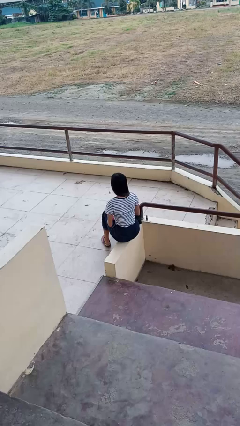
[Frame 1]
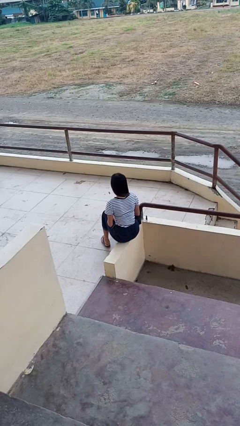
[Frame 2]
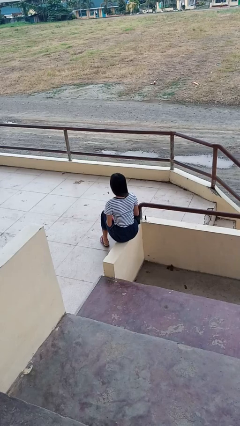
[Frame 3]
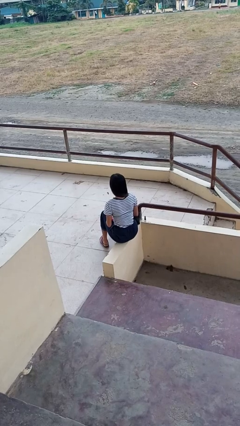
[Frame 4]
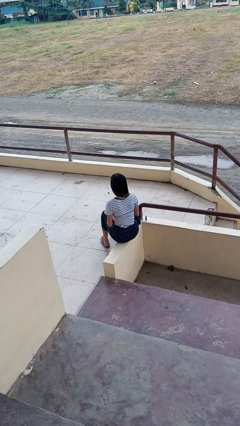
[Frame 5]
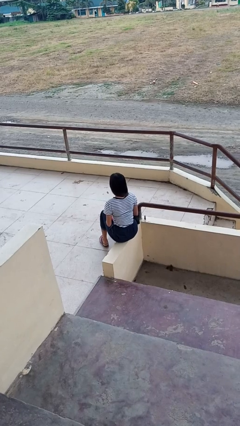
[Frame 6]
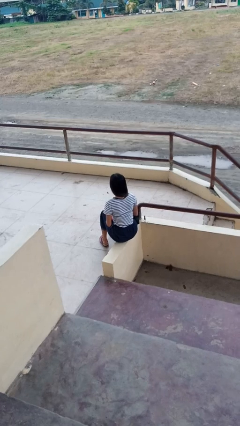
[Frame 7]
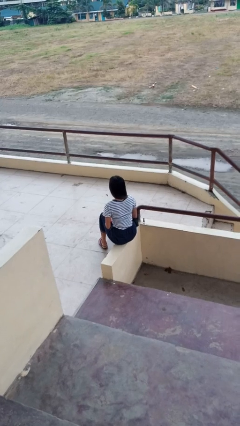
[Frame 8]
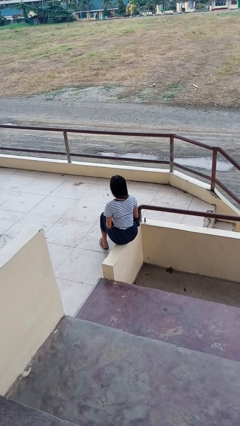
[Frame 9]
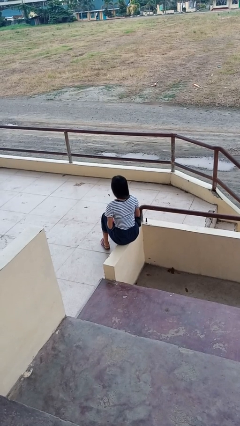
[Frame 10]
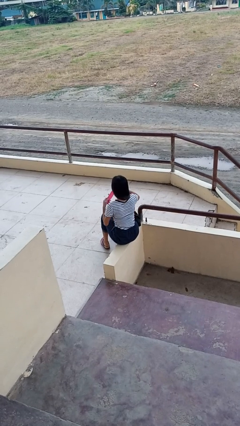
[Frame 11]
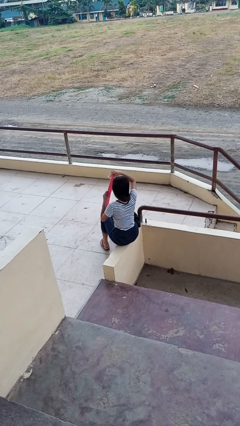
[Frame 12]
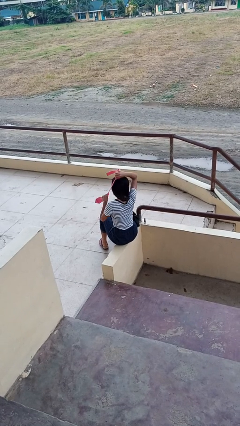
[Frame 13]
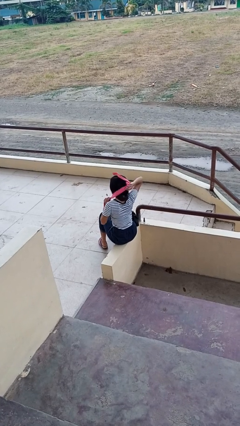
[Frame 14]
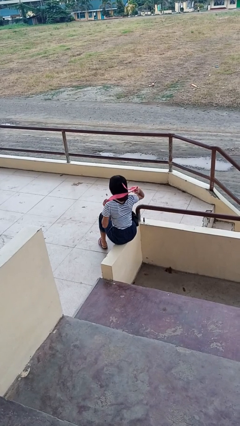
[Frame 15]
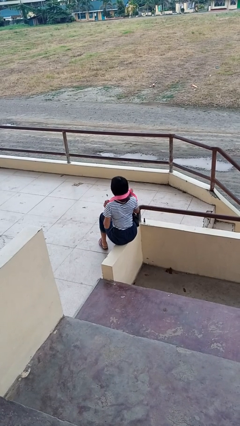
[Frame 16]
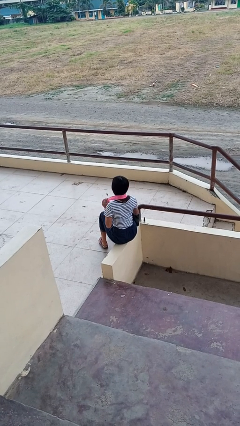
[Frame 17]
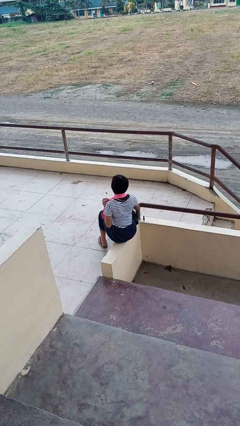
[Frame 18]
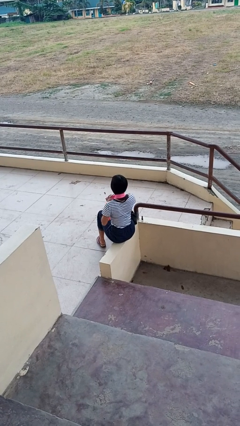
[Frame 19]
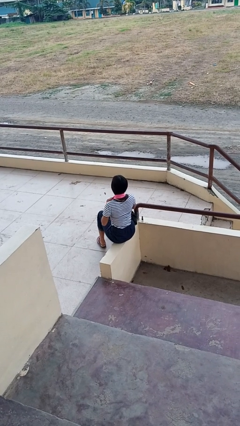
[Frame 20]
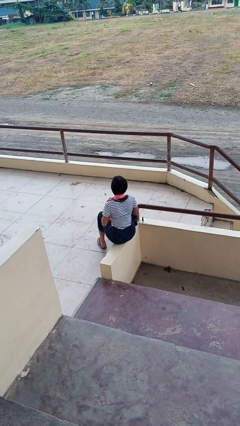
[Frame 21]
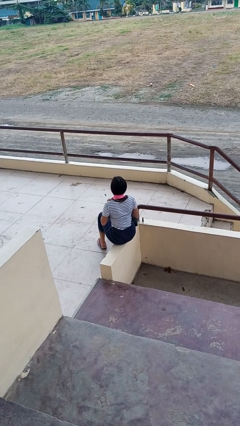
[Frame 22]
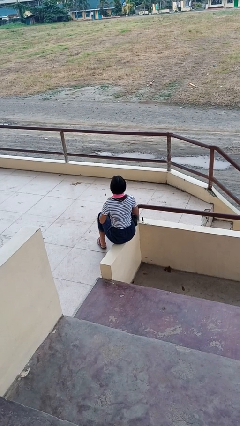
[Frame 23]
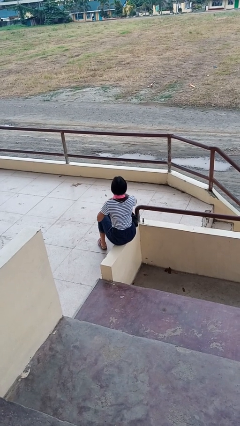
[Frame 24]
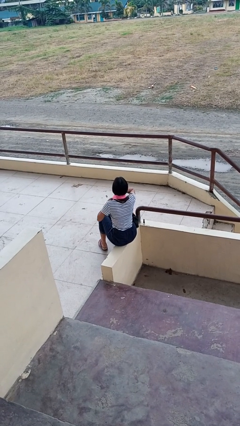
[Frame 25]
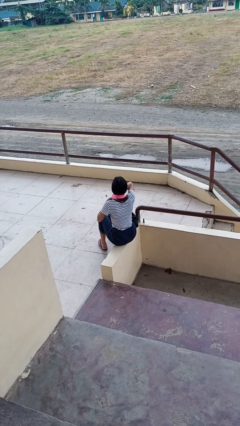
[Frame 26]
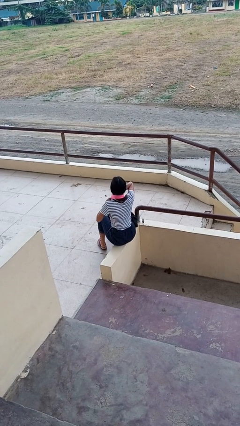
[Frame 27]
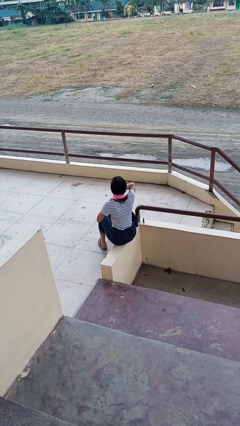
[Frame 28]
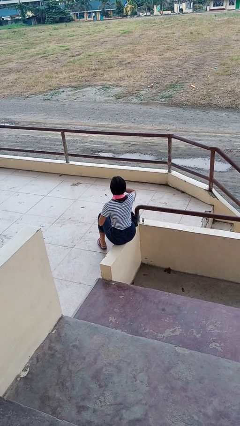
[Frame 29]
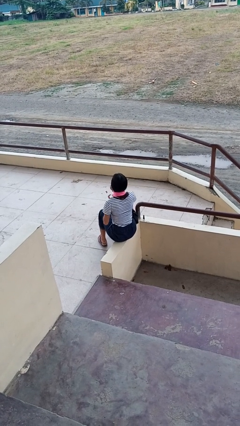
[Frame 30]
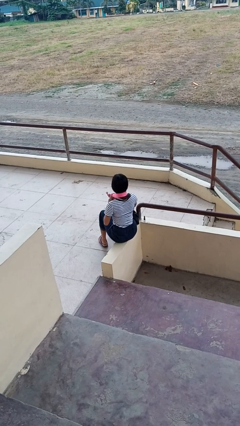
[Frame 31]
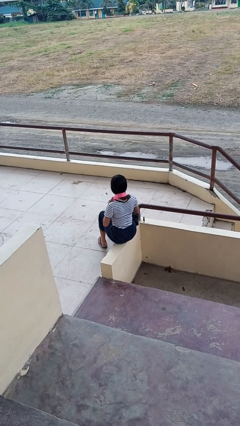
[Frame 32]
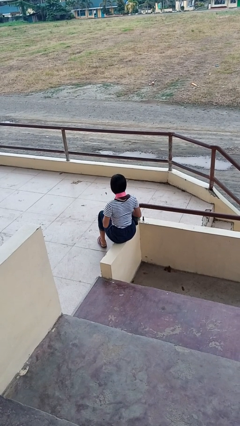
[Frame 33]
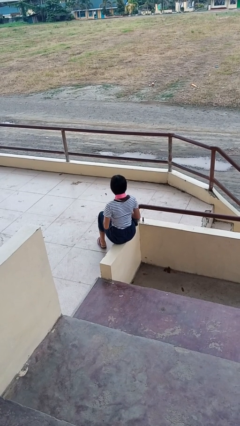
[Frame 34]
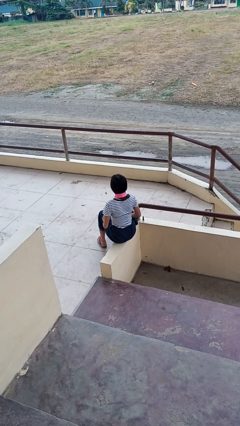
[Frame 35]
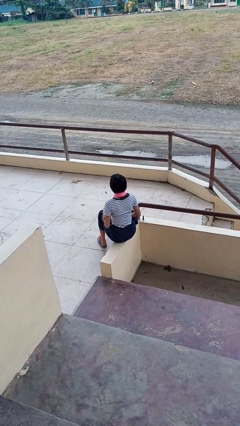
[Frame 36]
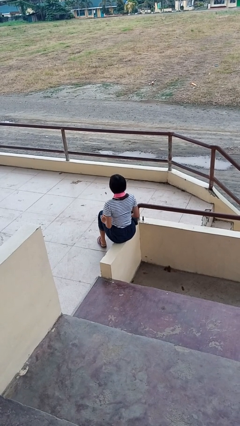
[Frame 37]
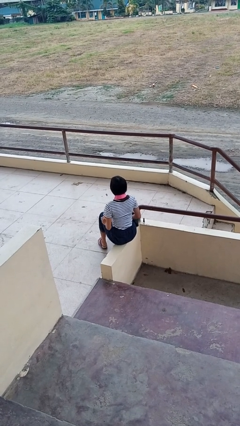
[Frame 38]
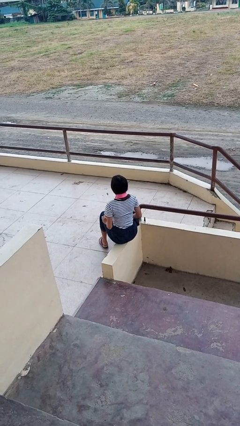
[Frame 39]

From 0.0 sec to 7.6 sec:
person puts on necktie

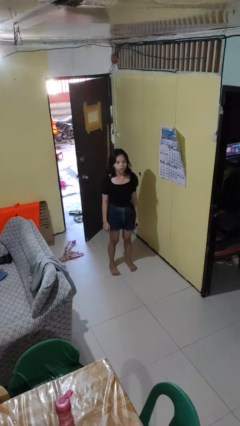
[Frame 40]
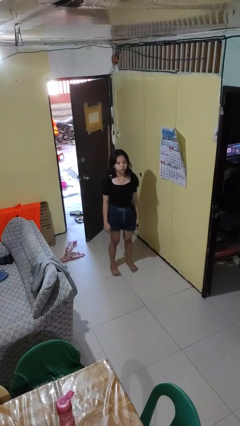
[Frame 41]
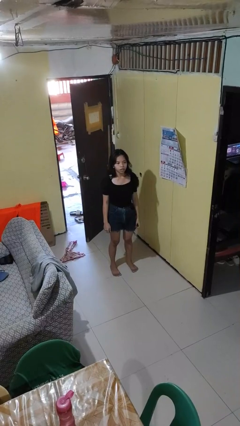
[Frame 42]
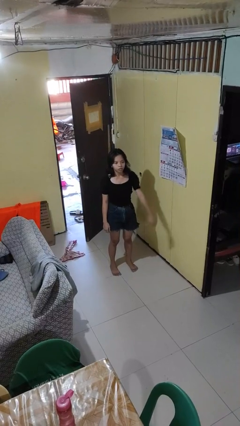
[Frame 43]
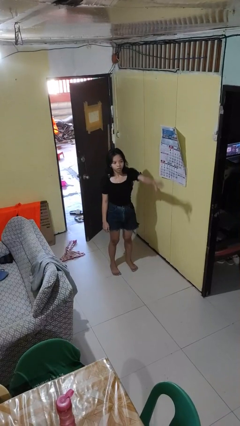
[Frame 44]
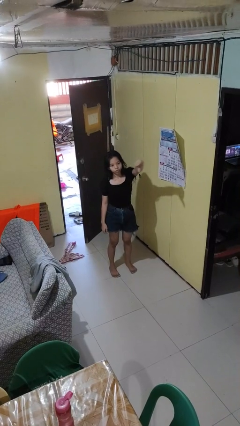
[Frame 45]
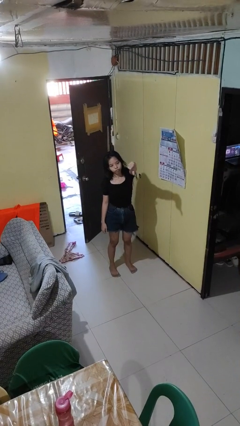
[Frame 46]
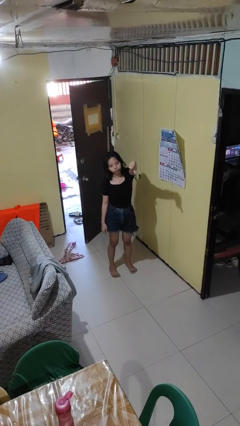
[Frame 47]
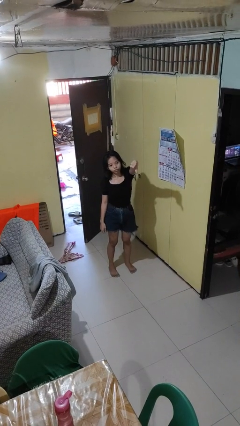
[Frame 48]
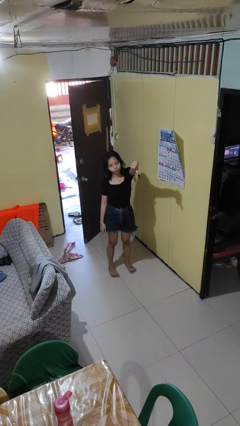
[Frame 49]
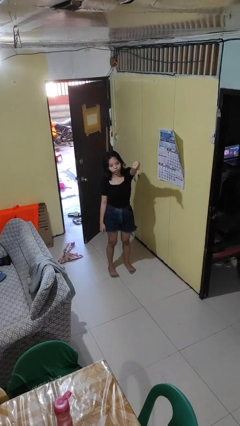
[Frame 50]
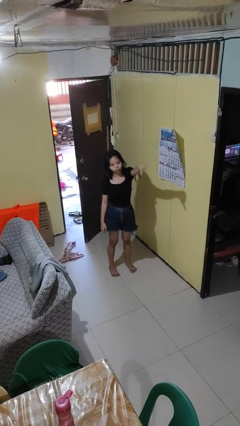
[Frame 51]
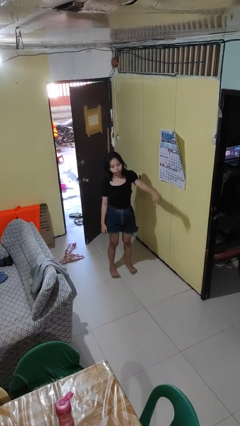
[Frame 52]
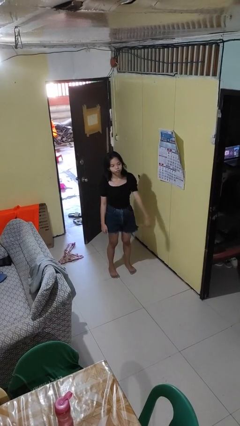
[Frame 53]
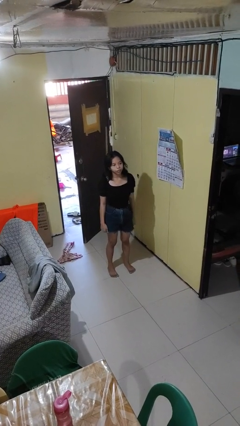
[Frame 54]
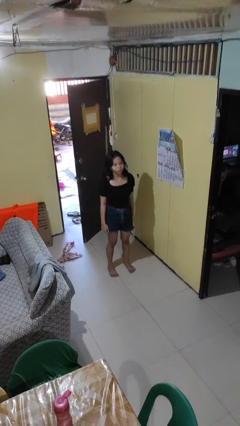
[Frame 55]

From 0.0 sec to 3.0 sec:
person gestures thumbs down

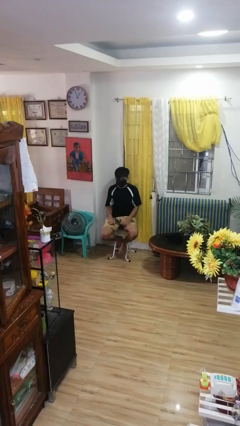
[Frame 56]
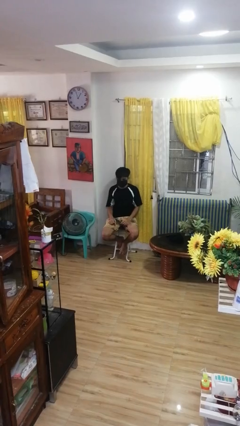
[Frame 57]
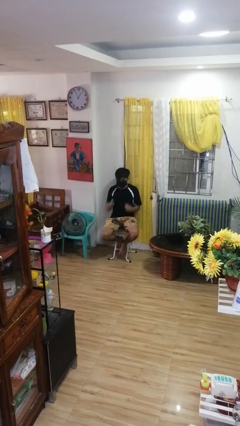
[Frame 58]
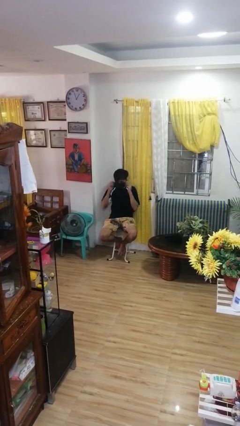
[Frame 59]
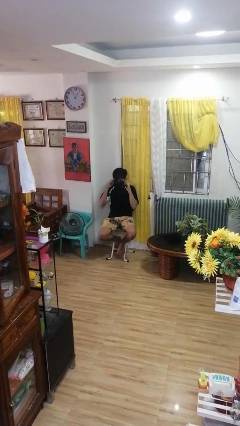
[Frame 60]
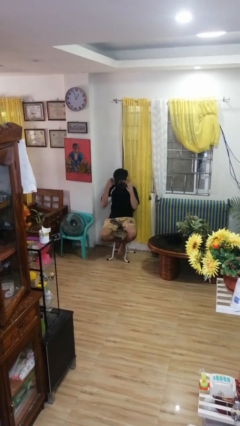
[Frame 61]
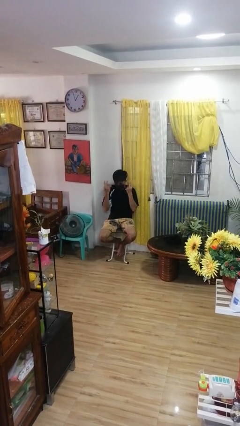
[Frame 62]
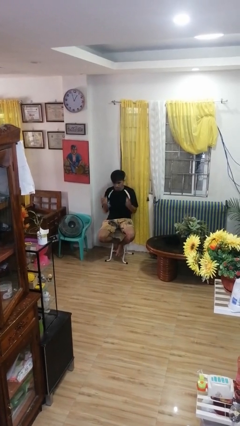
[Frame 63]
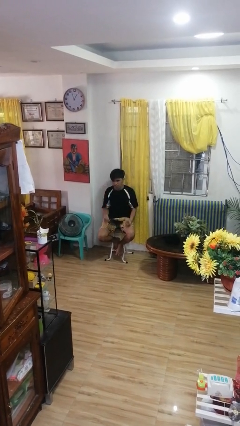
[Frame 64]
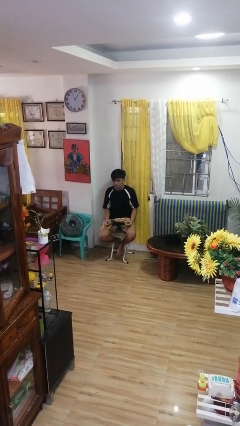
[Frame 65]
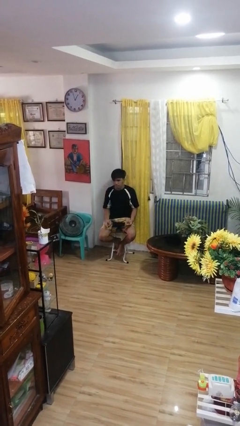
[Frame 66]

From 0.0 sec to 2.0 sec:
person takes off facemask

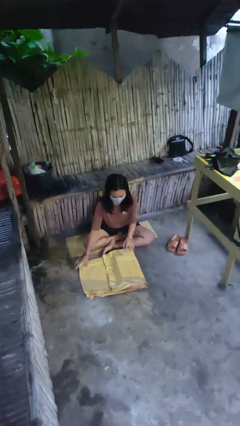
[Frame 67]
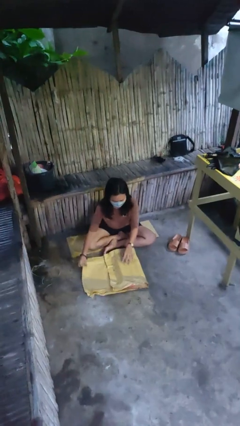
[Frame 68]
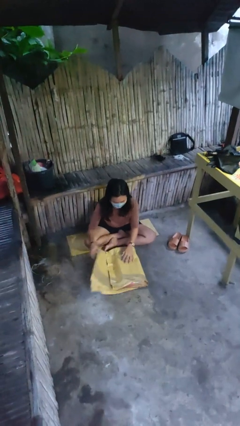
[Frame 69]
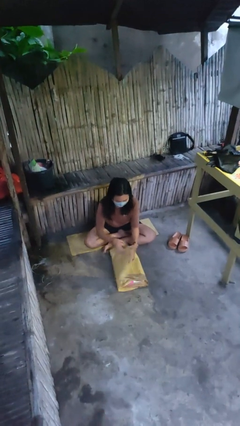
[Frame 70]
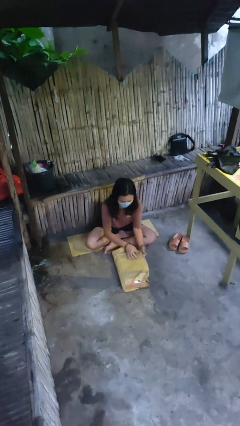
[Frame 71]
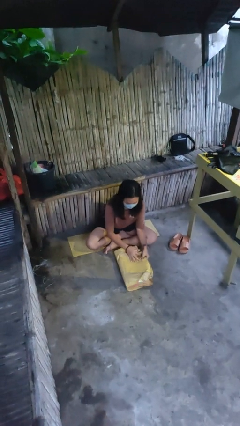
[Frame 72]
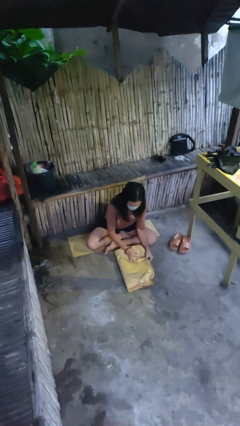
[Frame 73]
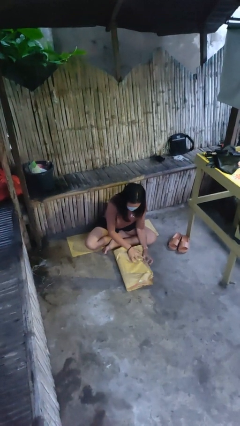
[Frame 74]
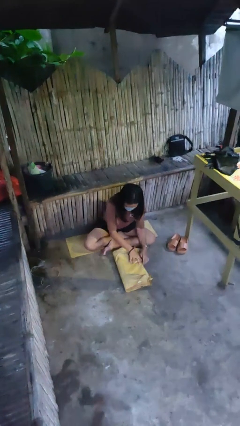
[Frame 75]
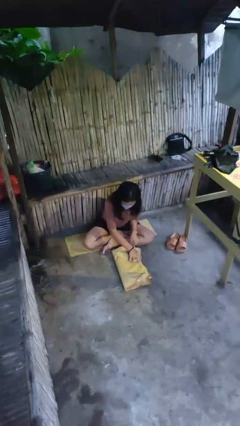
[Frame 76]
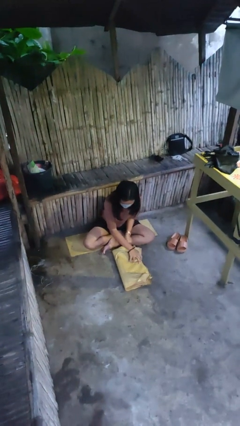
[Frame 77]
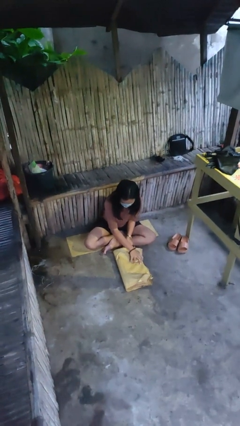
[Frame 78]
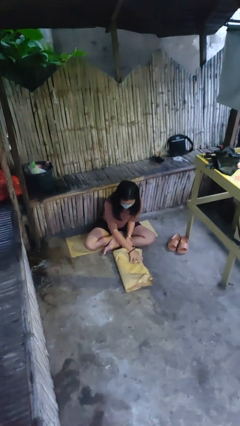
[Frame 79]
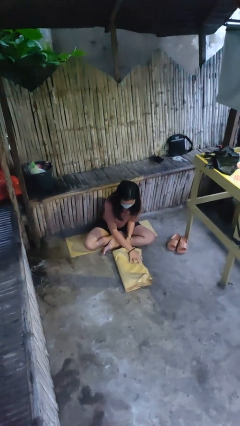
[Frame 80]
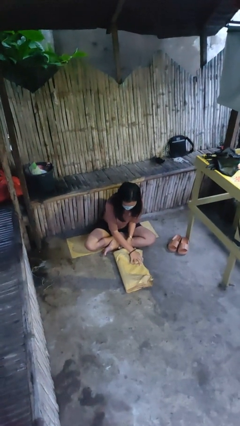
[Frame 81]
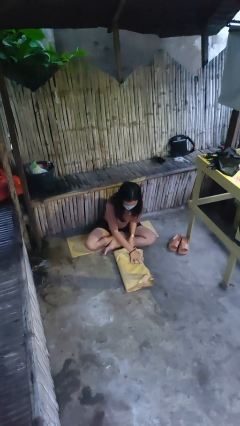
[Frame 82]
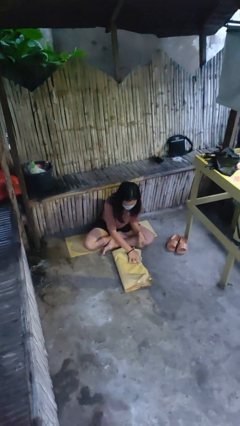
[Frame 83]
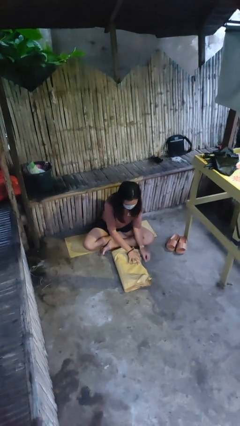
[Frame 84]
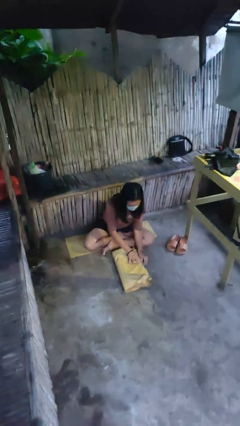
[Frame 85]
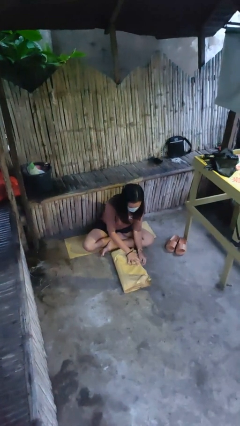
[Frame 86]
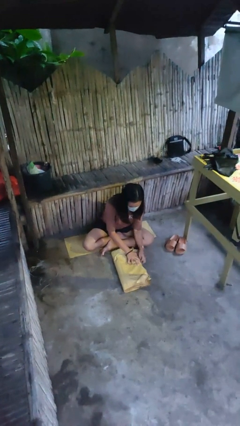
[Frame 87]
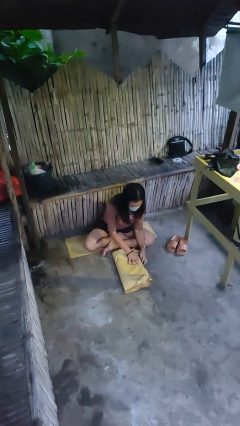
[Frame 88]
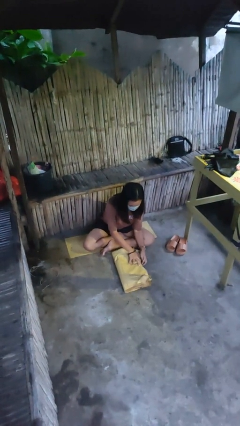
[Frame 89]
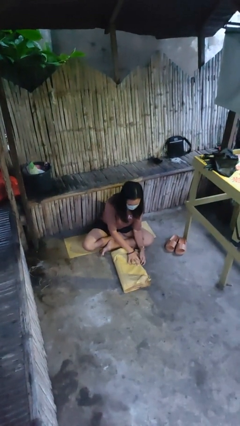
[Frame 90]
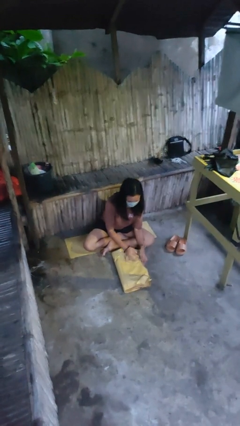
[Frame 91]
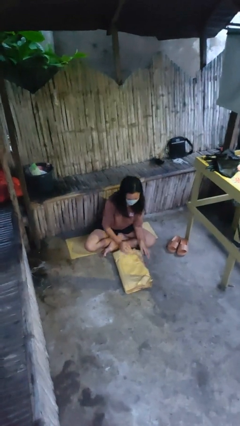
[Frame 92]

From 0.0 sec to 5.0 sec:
person wraps box

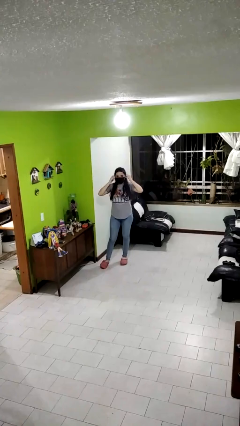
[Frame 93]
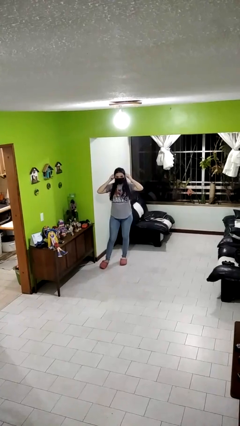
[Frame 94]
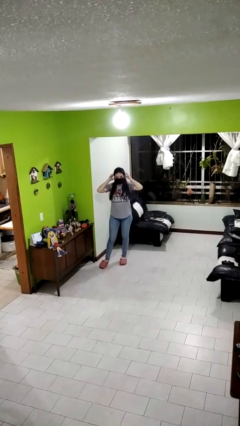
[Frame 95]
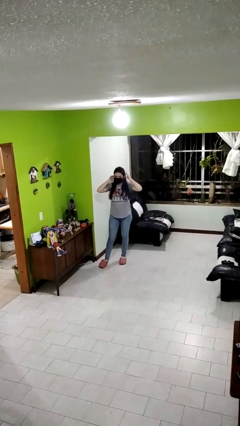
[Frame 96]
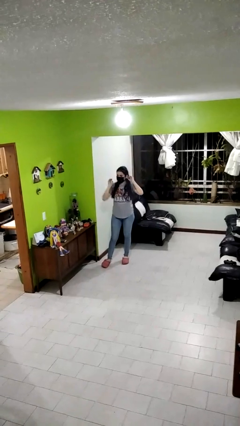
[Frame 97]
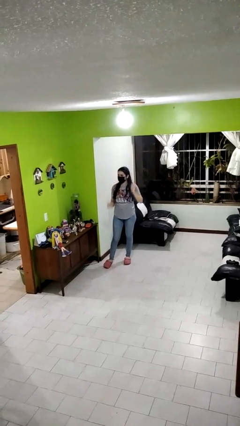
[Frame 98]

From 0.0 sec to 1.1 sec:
person puts on facemask
